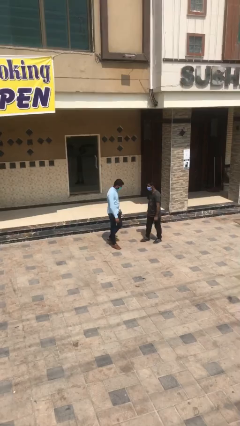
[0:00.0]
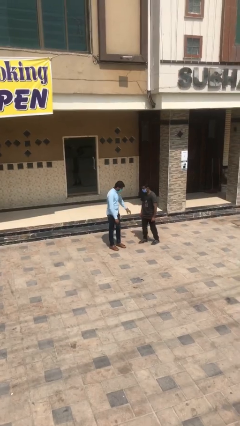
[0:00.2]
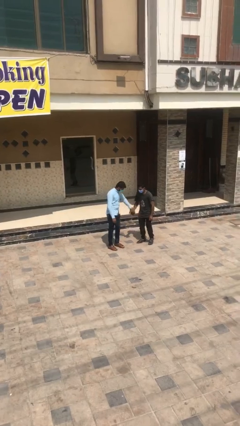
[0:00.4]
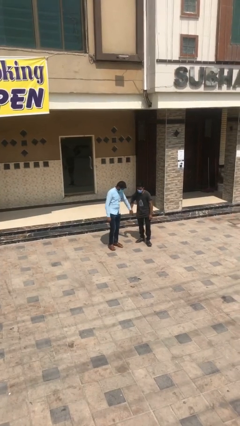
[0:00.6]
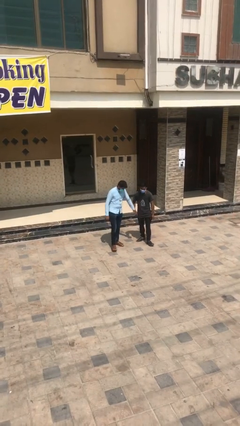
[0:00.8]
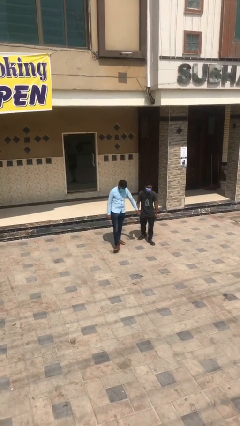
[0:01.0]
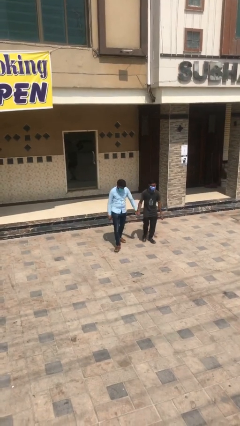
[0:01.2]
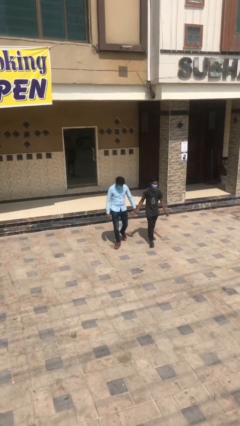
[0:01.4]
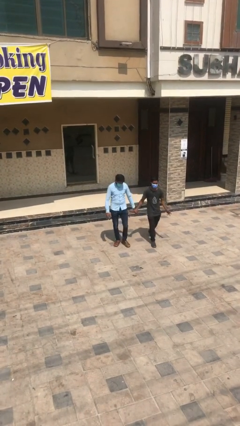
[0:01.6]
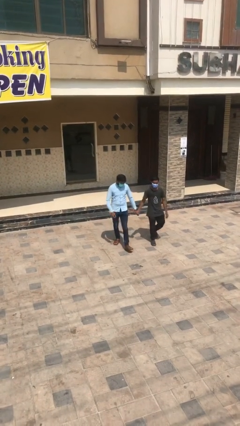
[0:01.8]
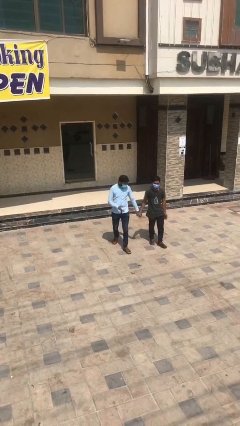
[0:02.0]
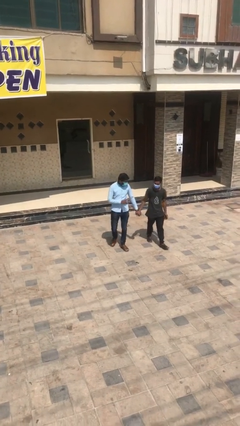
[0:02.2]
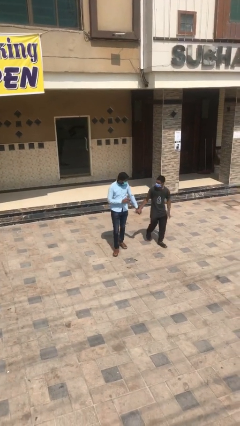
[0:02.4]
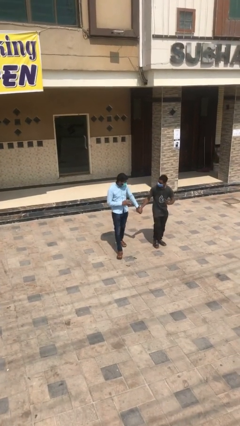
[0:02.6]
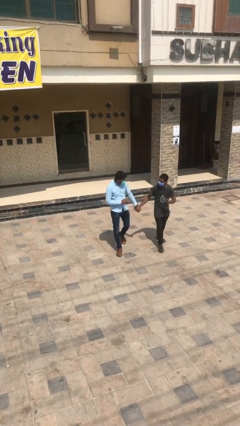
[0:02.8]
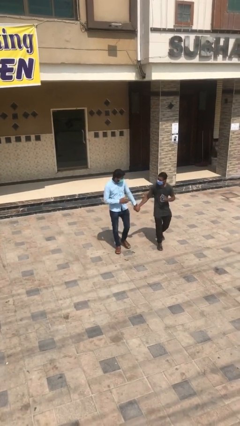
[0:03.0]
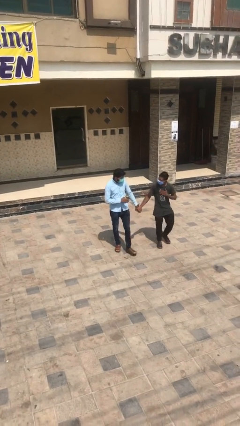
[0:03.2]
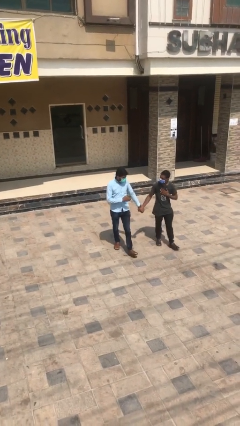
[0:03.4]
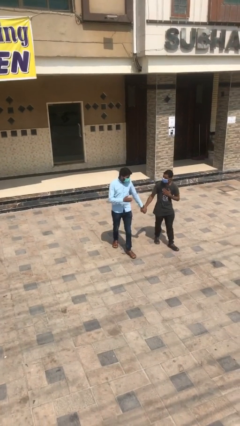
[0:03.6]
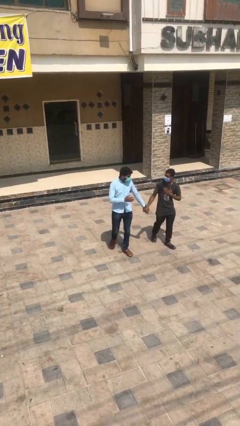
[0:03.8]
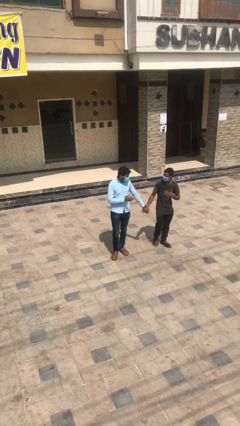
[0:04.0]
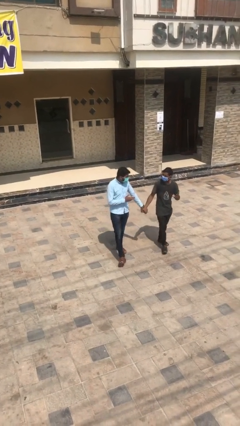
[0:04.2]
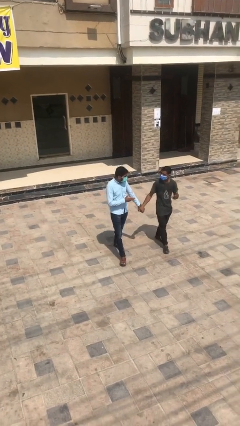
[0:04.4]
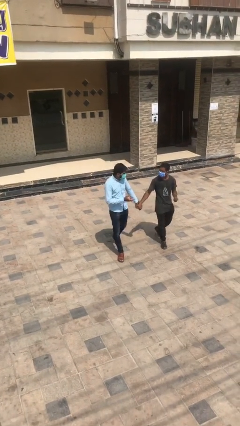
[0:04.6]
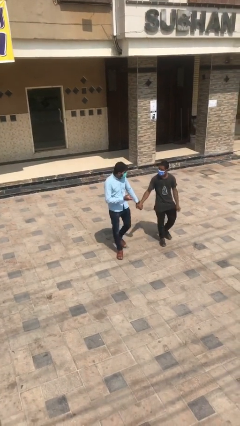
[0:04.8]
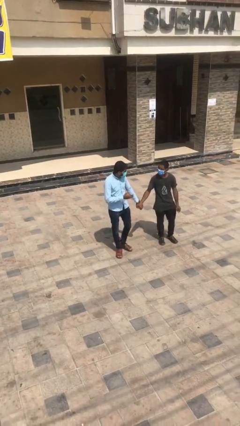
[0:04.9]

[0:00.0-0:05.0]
person holds hand

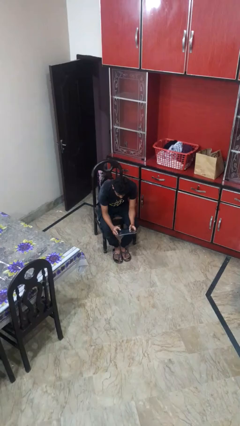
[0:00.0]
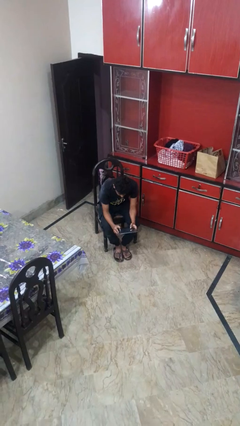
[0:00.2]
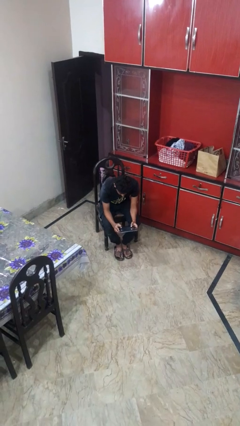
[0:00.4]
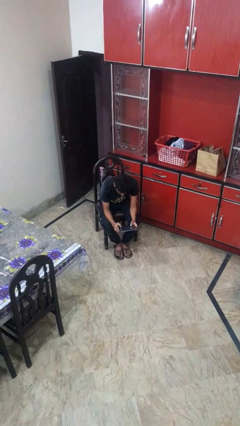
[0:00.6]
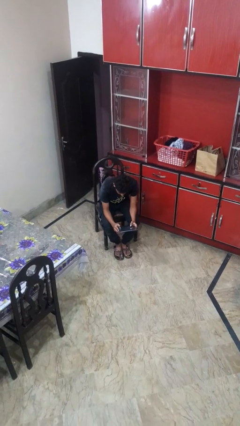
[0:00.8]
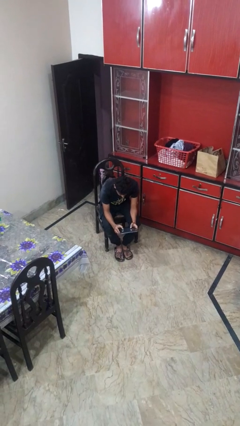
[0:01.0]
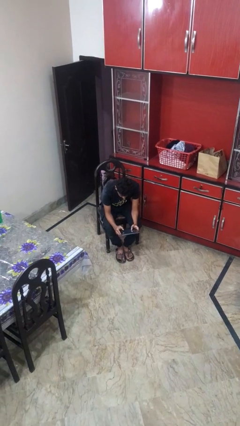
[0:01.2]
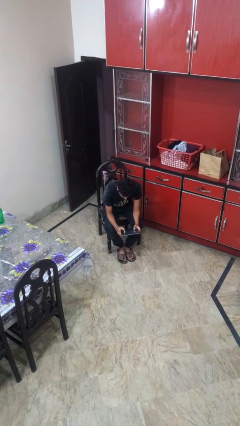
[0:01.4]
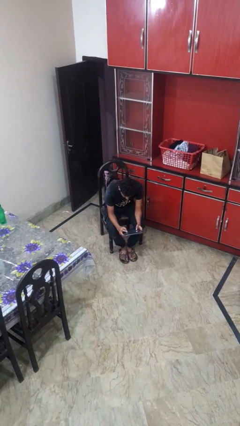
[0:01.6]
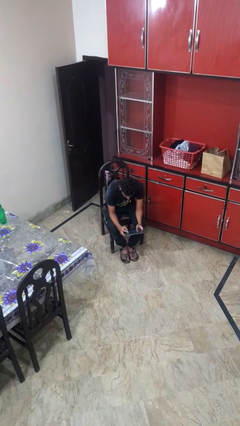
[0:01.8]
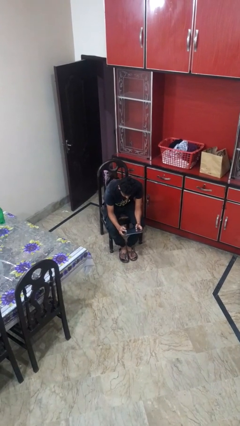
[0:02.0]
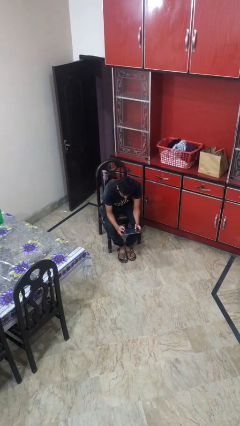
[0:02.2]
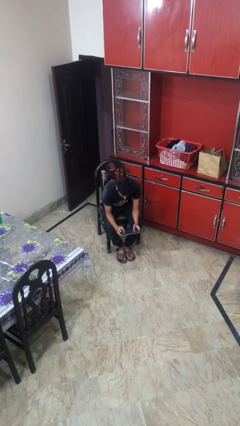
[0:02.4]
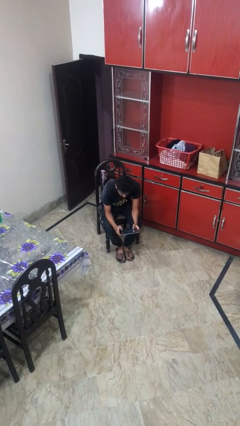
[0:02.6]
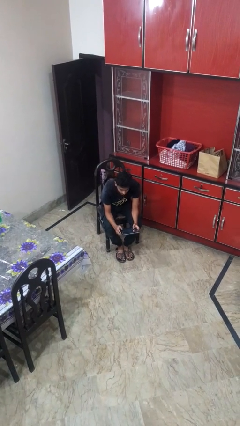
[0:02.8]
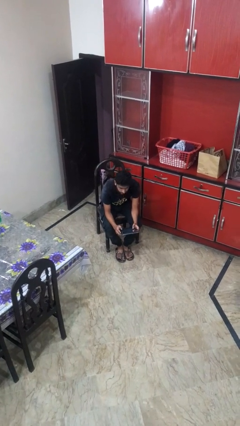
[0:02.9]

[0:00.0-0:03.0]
person interacts with tablet

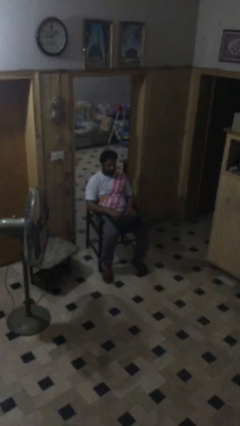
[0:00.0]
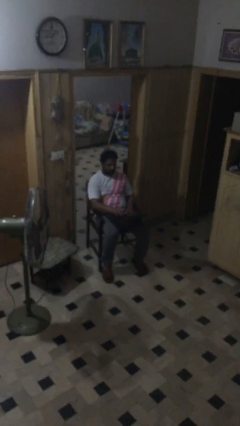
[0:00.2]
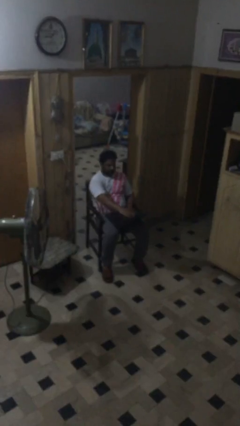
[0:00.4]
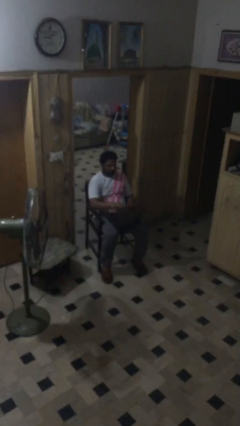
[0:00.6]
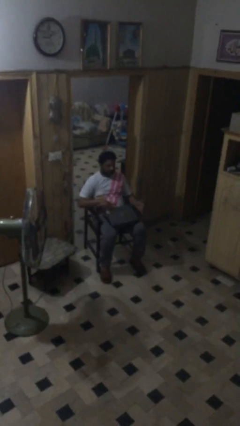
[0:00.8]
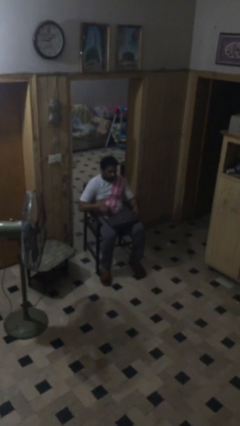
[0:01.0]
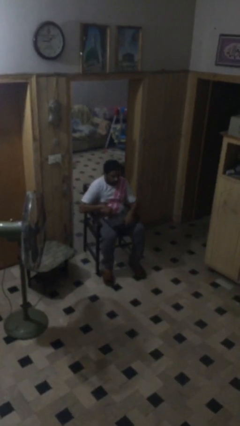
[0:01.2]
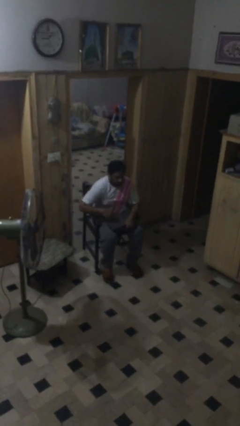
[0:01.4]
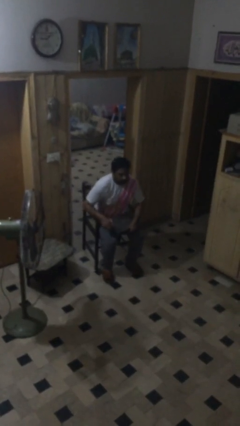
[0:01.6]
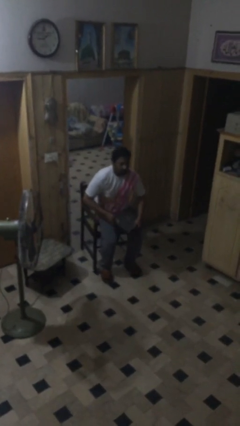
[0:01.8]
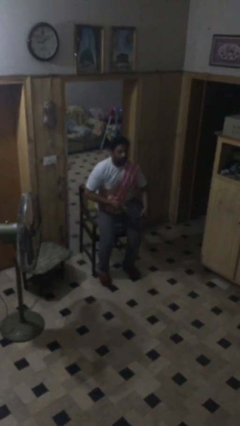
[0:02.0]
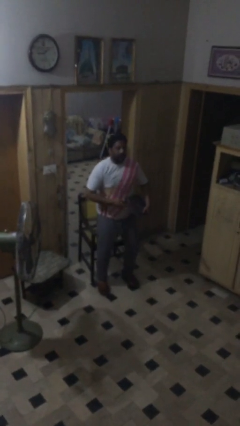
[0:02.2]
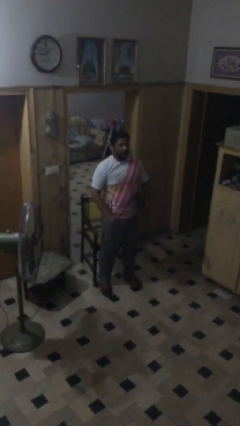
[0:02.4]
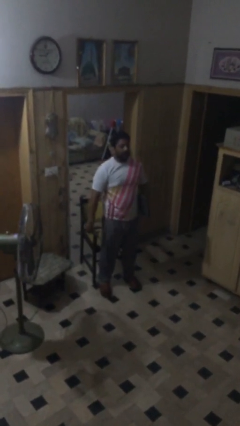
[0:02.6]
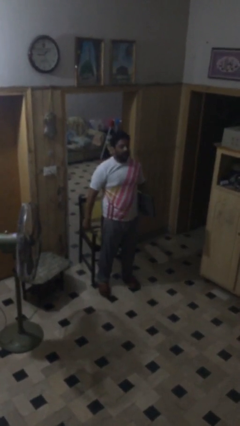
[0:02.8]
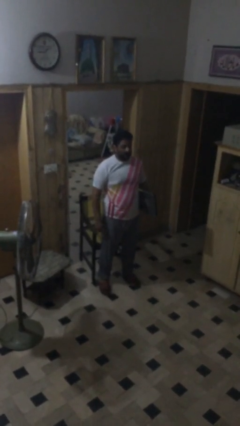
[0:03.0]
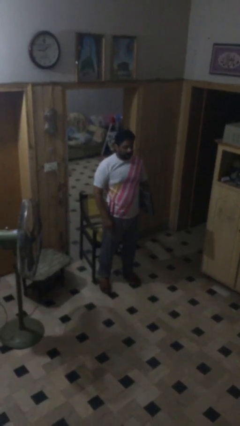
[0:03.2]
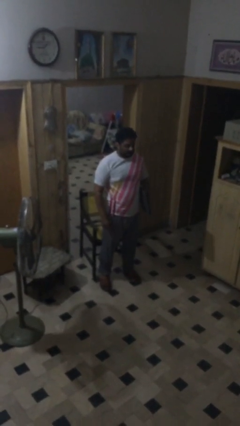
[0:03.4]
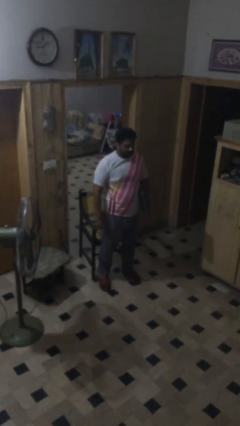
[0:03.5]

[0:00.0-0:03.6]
person stands up

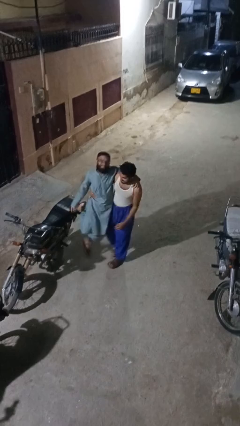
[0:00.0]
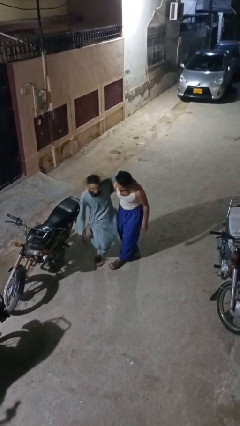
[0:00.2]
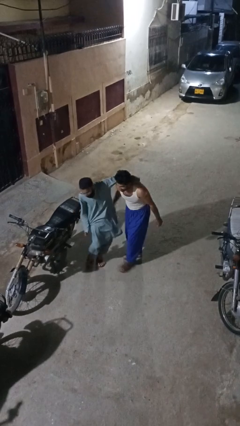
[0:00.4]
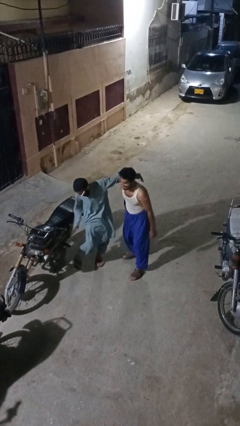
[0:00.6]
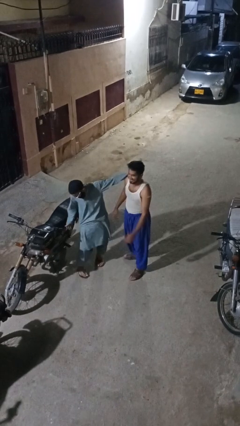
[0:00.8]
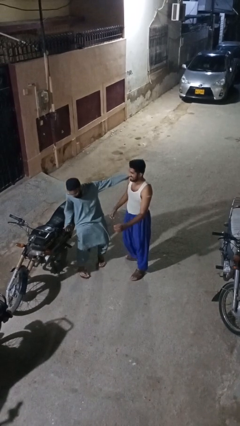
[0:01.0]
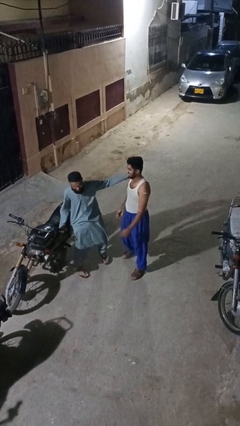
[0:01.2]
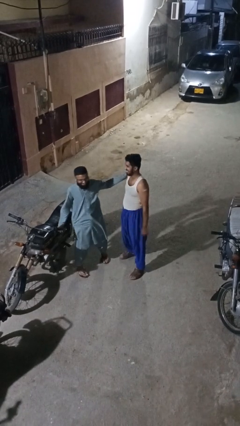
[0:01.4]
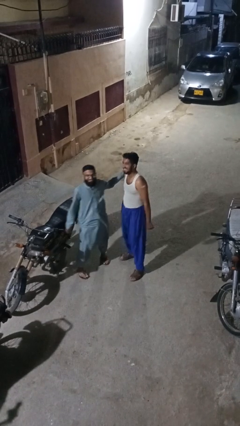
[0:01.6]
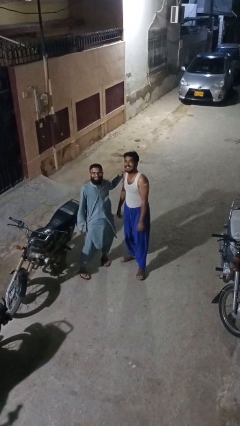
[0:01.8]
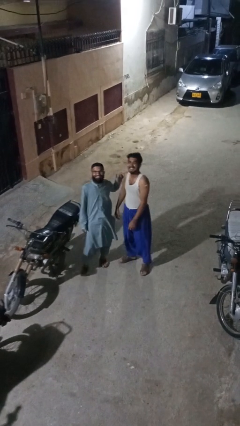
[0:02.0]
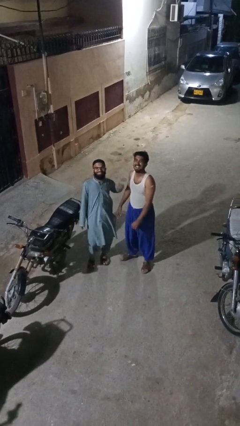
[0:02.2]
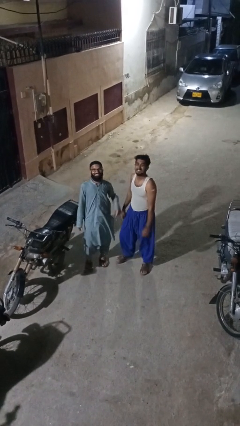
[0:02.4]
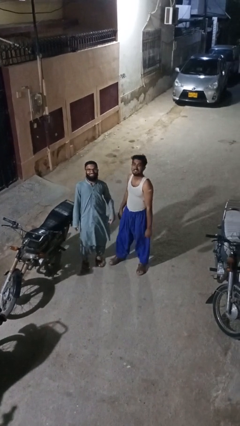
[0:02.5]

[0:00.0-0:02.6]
person puts down person

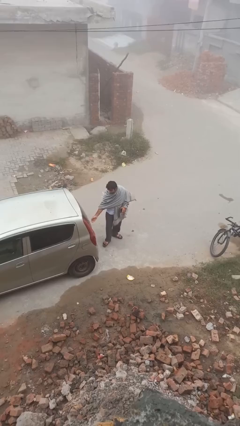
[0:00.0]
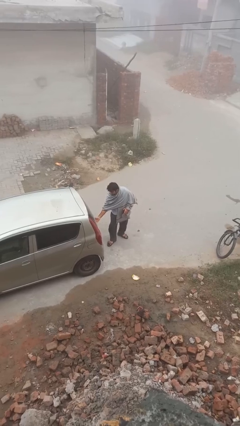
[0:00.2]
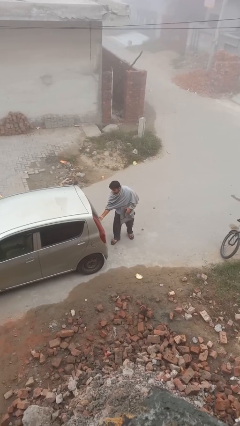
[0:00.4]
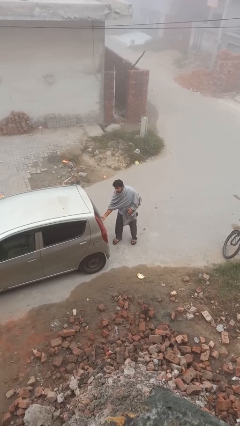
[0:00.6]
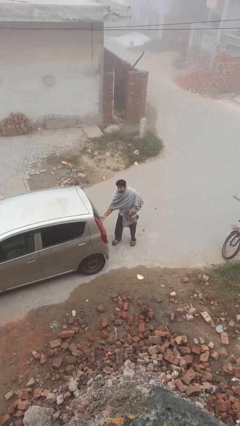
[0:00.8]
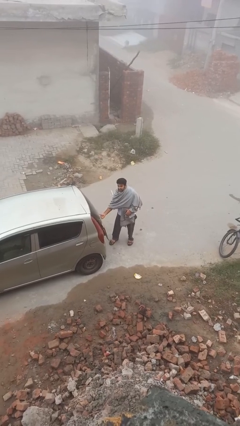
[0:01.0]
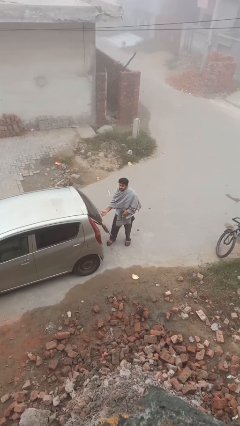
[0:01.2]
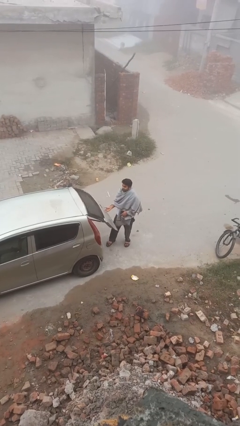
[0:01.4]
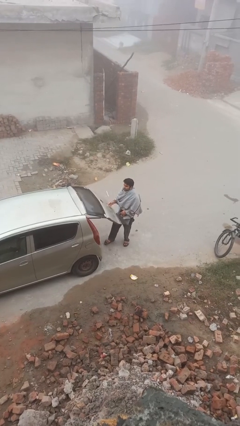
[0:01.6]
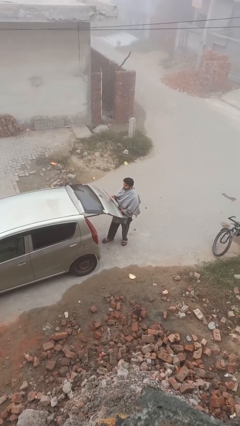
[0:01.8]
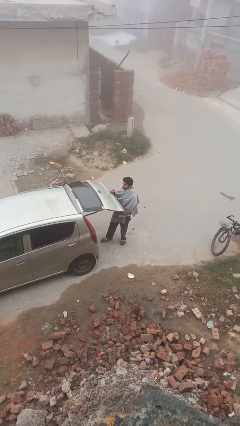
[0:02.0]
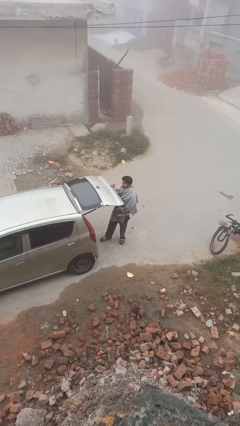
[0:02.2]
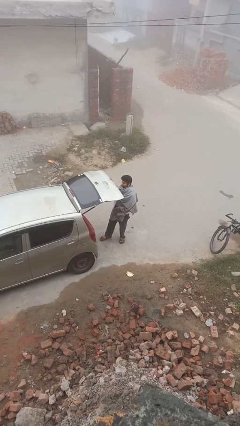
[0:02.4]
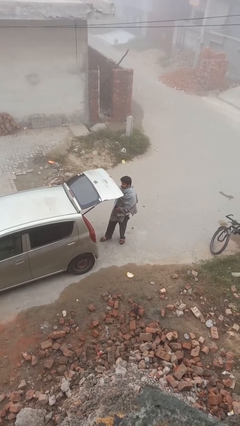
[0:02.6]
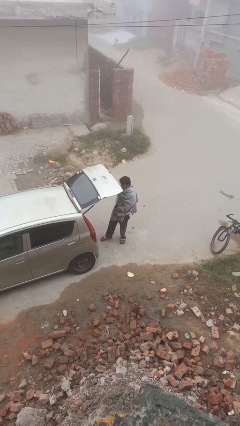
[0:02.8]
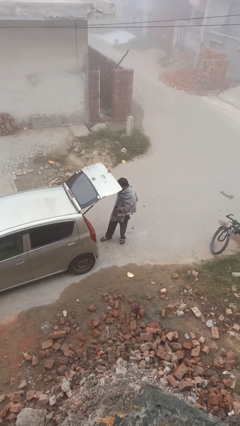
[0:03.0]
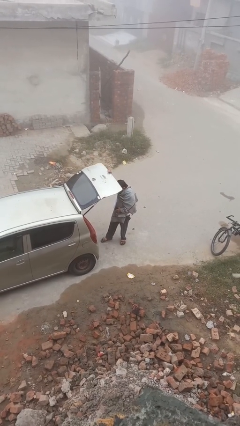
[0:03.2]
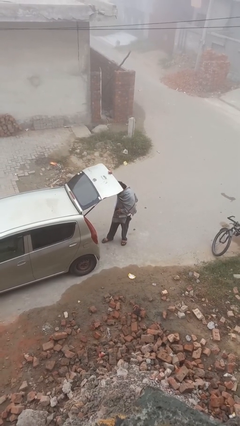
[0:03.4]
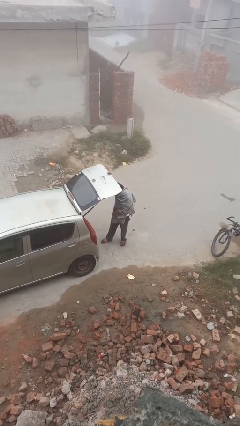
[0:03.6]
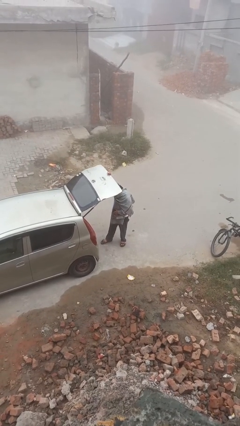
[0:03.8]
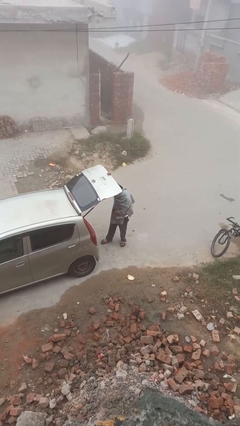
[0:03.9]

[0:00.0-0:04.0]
person opens car trunk
